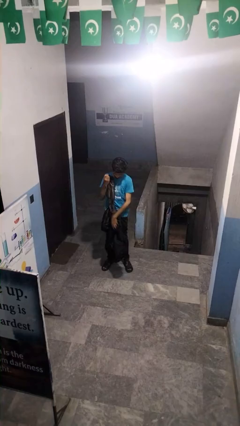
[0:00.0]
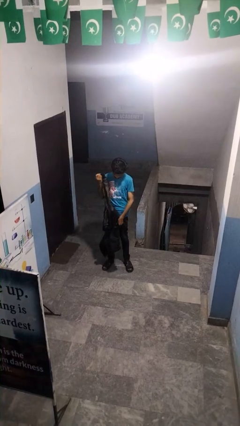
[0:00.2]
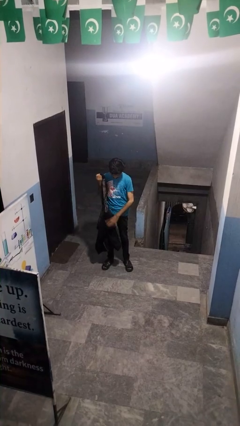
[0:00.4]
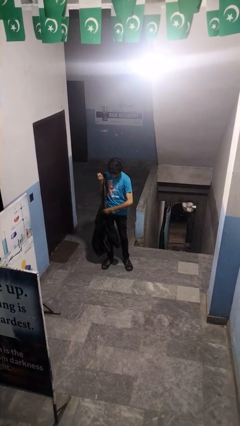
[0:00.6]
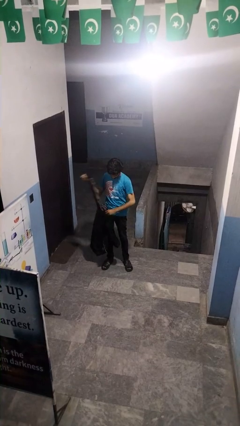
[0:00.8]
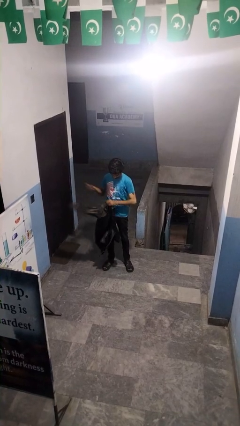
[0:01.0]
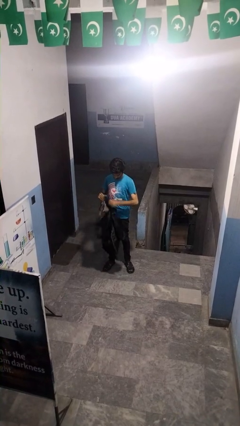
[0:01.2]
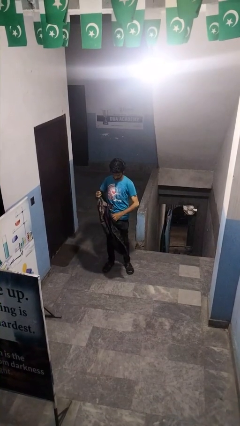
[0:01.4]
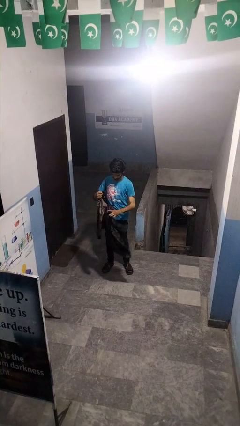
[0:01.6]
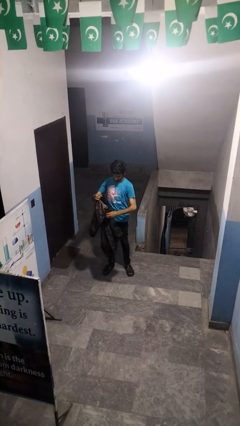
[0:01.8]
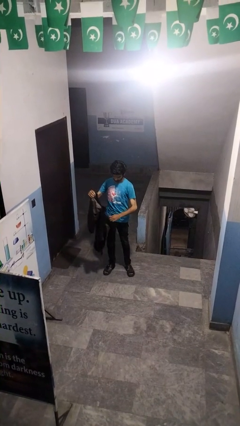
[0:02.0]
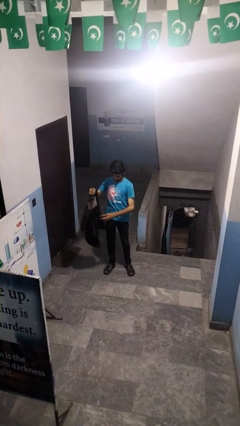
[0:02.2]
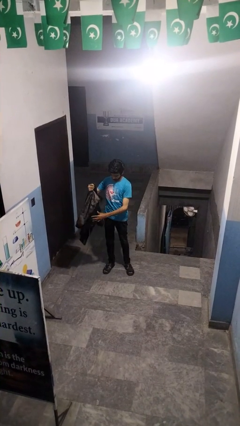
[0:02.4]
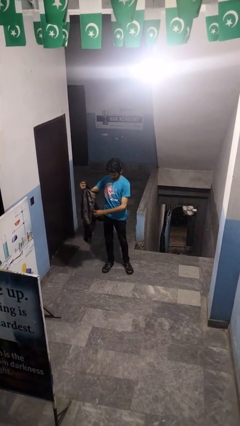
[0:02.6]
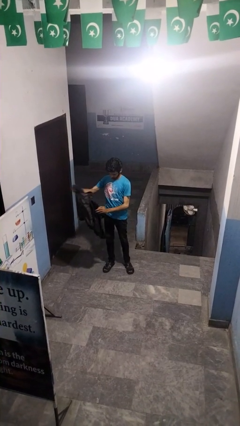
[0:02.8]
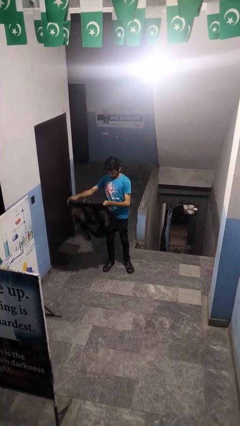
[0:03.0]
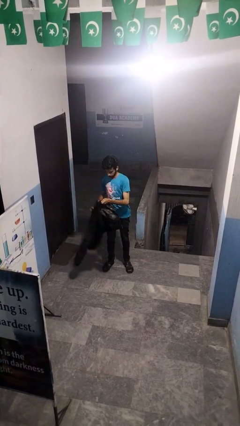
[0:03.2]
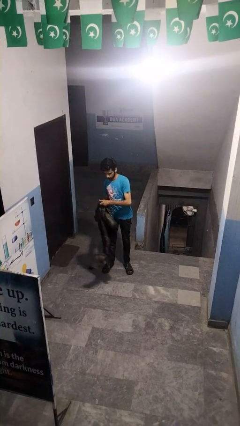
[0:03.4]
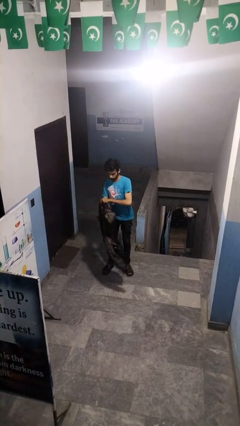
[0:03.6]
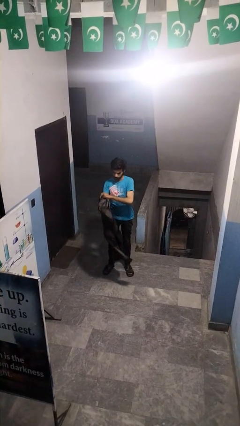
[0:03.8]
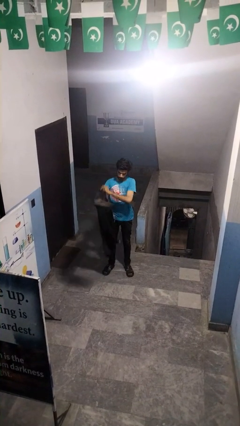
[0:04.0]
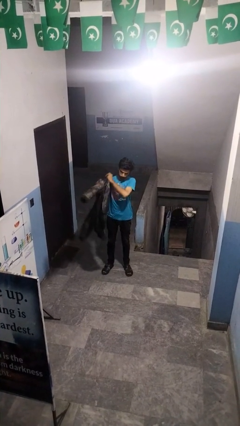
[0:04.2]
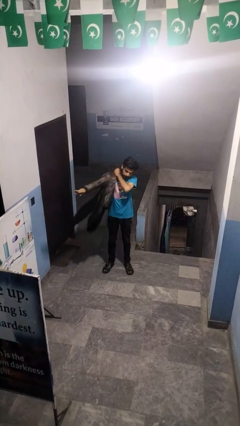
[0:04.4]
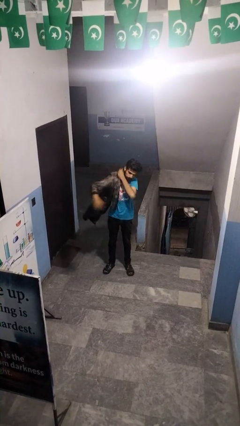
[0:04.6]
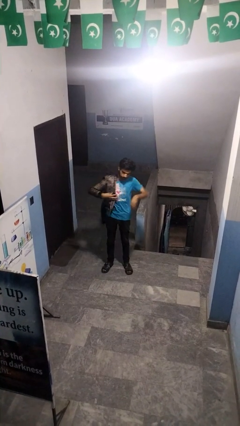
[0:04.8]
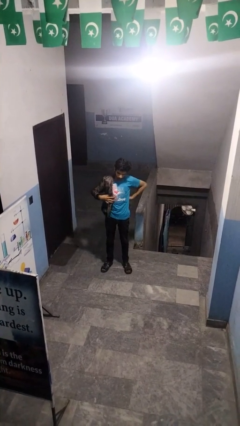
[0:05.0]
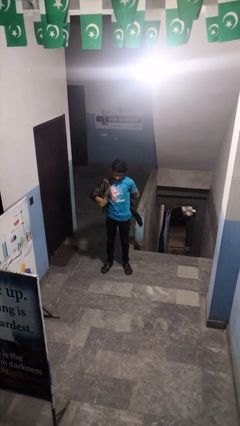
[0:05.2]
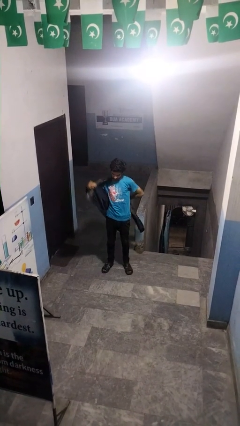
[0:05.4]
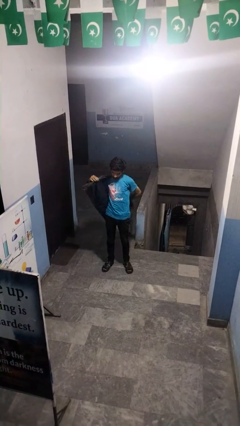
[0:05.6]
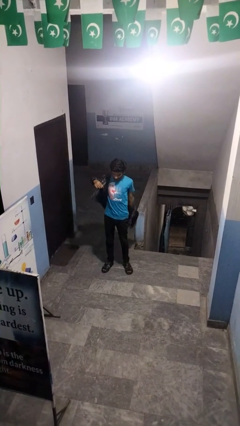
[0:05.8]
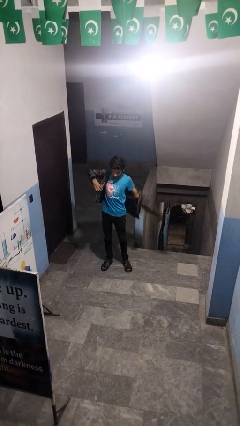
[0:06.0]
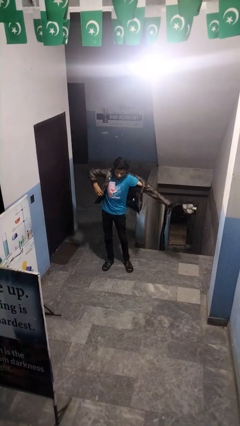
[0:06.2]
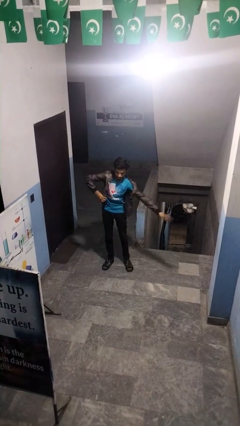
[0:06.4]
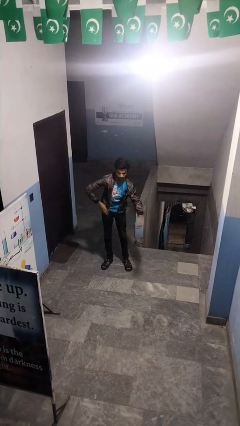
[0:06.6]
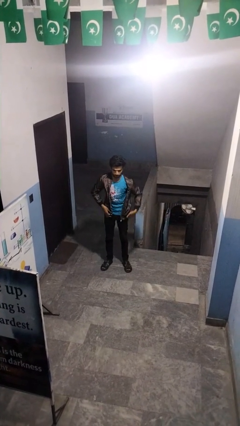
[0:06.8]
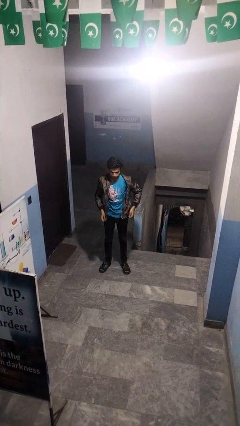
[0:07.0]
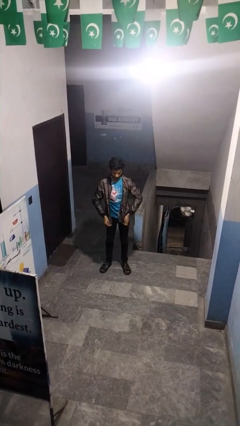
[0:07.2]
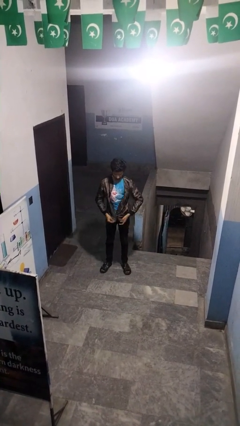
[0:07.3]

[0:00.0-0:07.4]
person puts on jacket

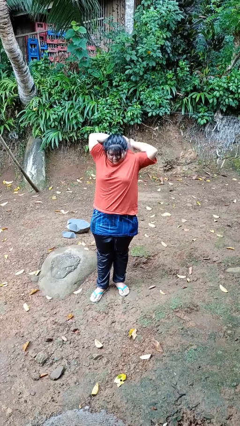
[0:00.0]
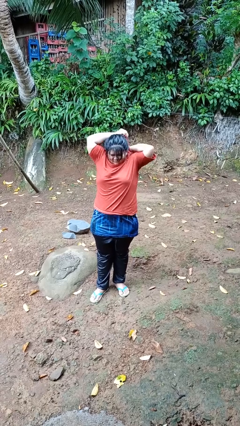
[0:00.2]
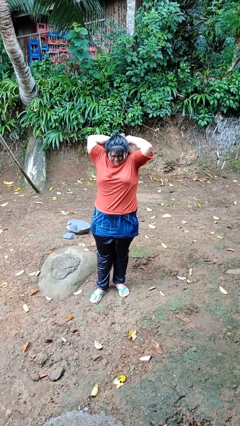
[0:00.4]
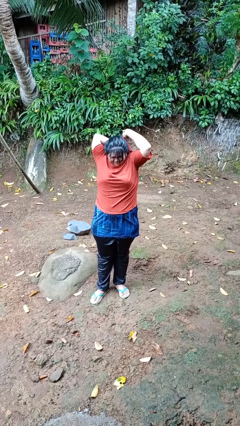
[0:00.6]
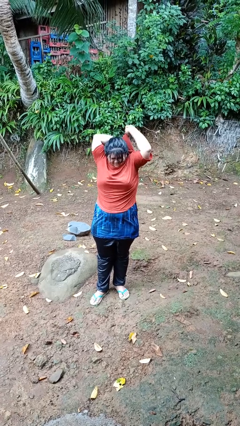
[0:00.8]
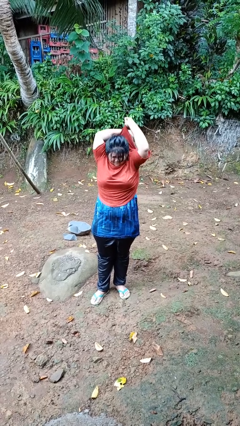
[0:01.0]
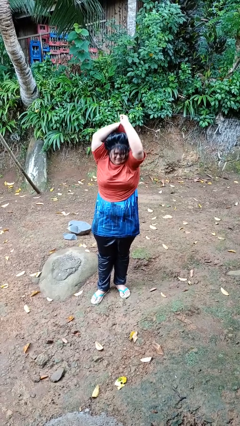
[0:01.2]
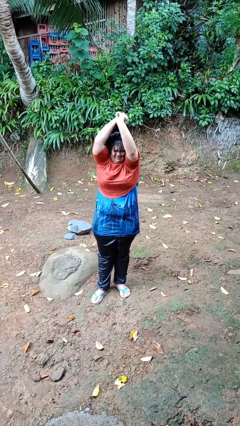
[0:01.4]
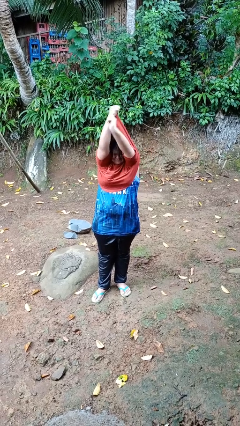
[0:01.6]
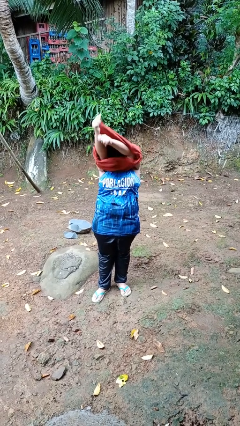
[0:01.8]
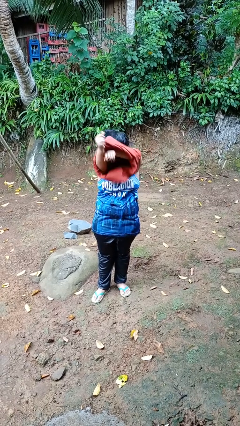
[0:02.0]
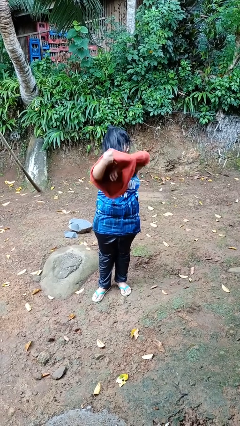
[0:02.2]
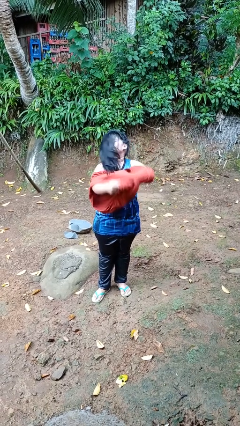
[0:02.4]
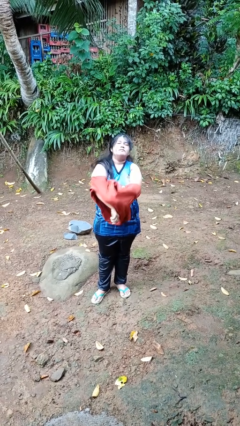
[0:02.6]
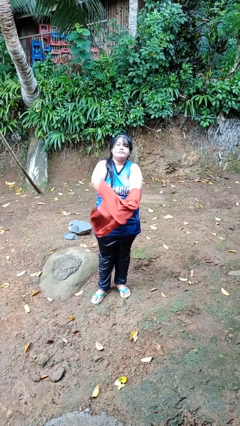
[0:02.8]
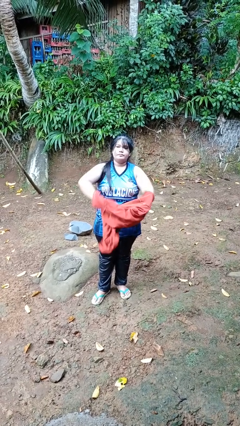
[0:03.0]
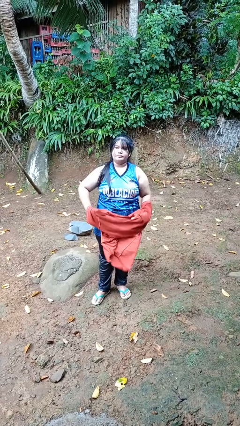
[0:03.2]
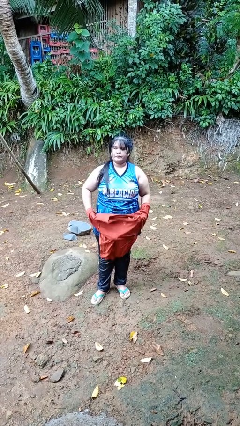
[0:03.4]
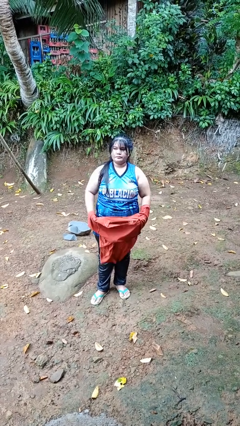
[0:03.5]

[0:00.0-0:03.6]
person takes off shirt

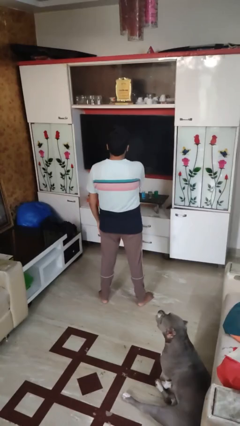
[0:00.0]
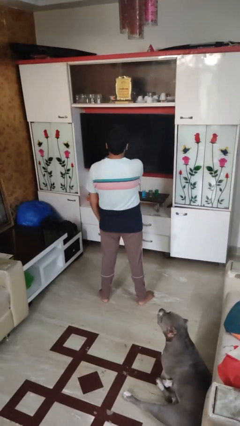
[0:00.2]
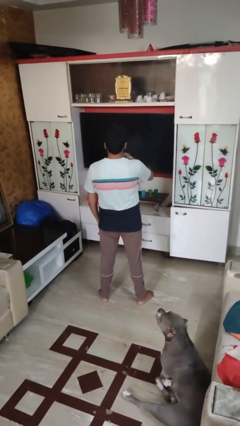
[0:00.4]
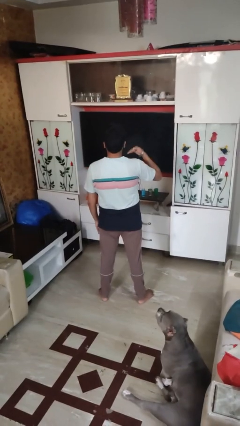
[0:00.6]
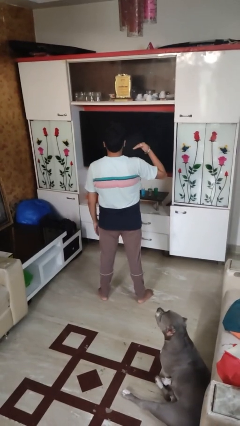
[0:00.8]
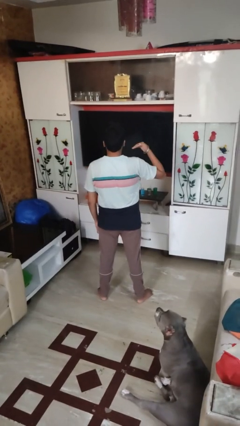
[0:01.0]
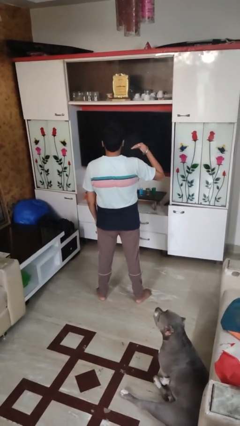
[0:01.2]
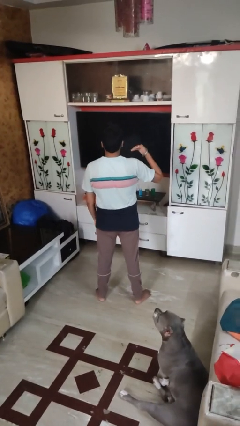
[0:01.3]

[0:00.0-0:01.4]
person gestures cut

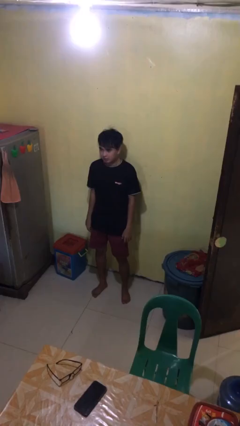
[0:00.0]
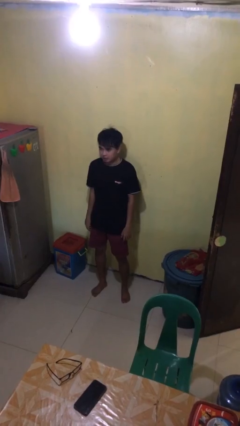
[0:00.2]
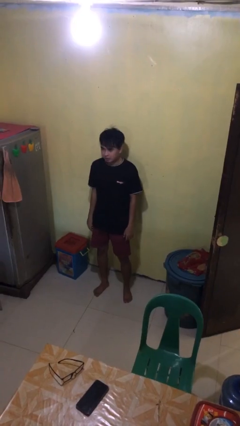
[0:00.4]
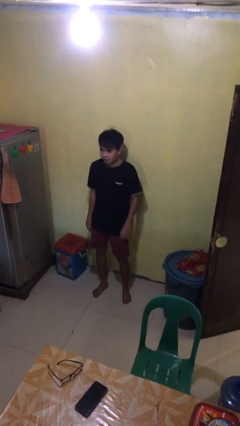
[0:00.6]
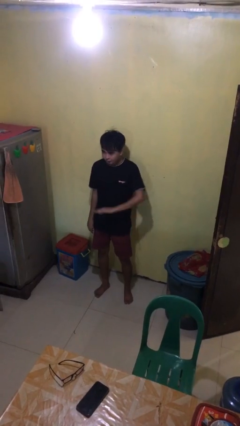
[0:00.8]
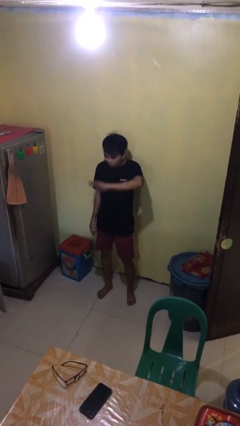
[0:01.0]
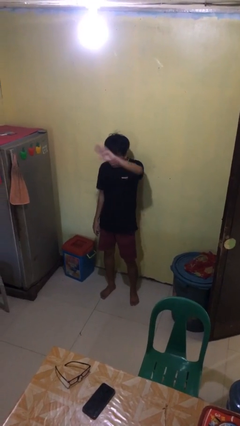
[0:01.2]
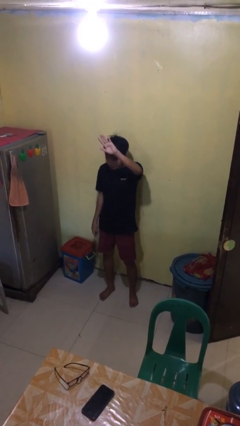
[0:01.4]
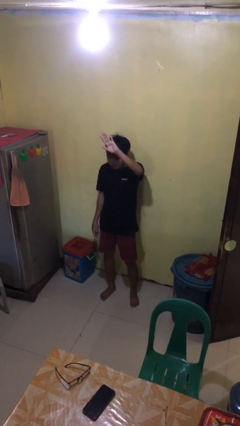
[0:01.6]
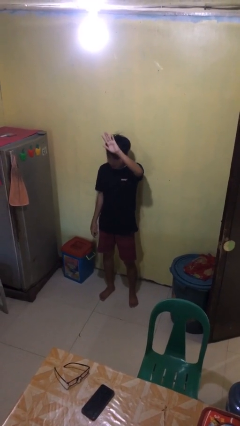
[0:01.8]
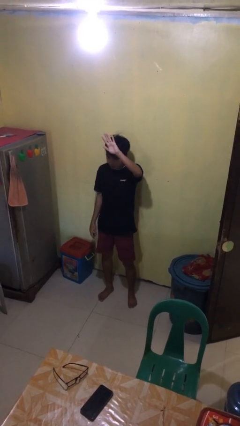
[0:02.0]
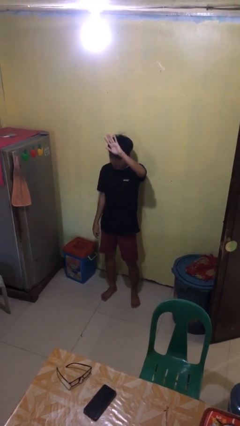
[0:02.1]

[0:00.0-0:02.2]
person gestures swipe up

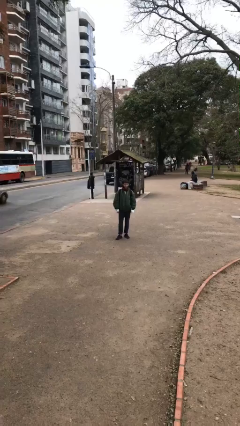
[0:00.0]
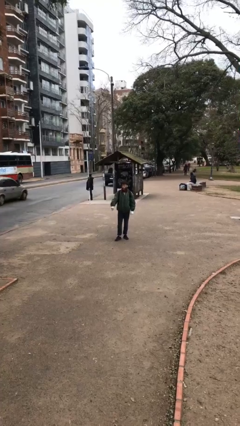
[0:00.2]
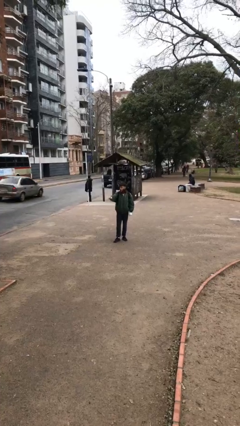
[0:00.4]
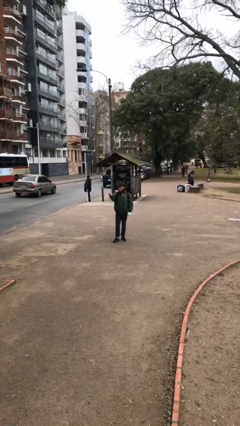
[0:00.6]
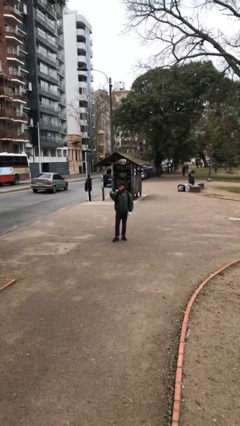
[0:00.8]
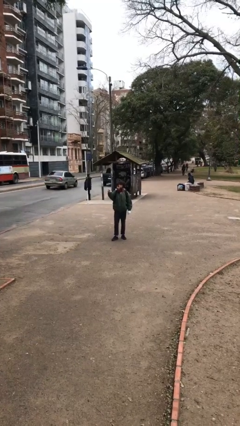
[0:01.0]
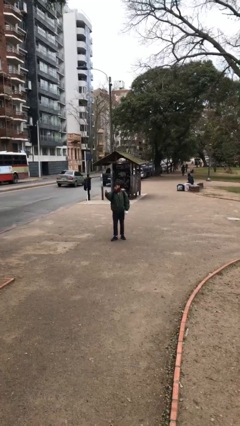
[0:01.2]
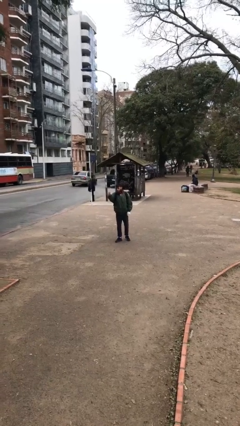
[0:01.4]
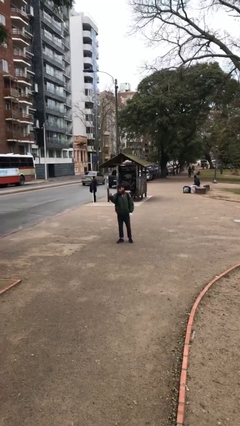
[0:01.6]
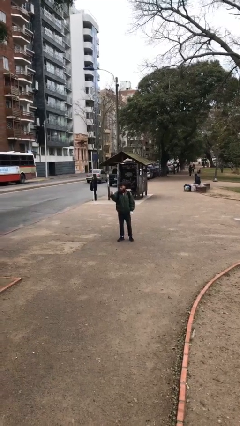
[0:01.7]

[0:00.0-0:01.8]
person points at person

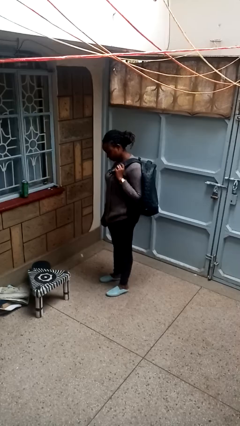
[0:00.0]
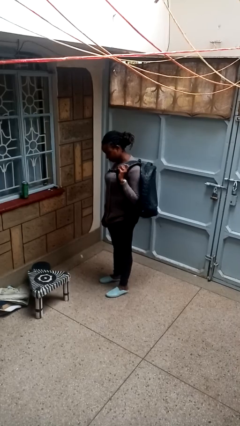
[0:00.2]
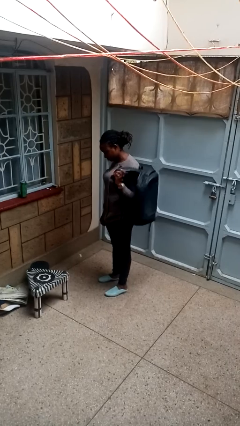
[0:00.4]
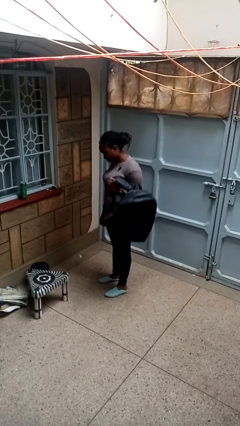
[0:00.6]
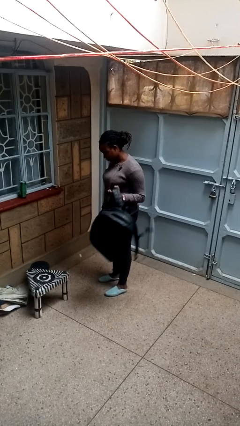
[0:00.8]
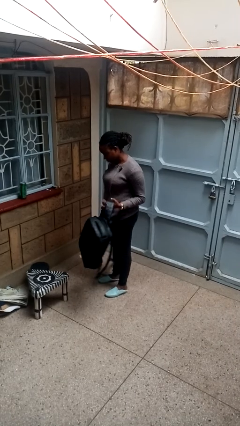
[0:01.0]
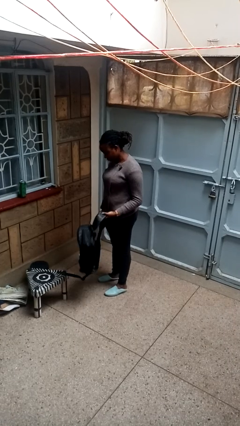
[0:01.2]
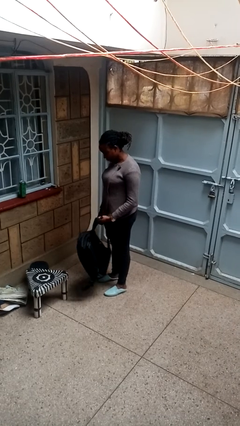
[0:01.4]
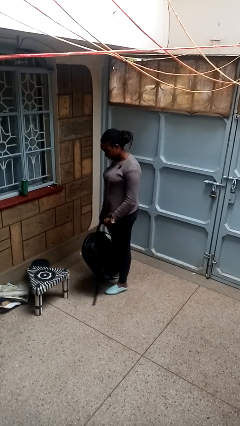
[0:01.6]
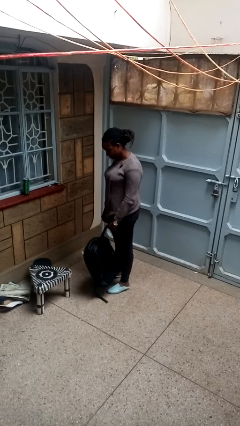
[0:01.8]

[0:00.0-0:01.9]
person takes off backpack
